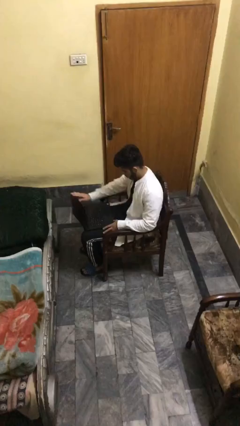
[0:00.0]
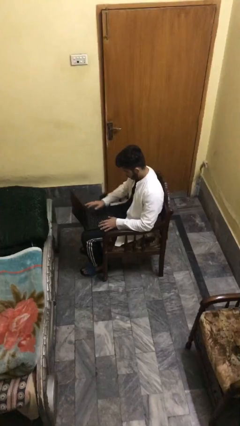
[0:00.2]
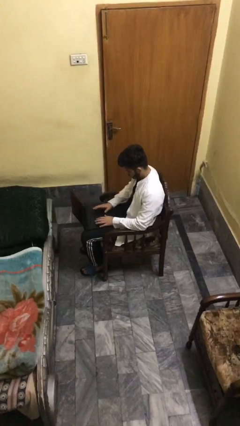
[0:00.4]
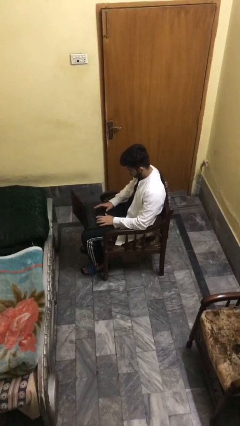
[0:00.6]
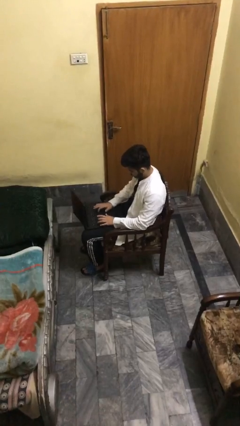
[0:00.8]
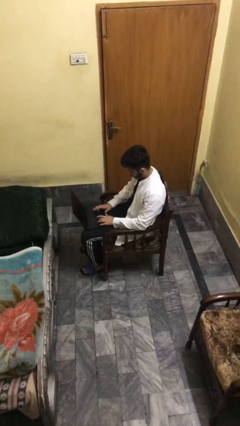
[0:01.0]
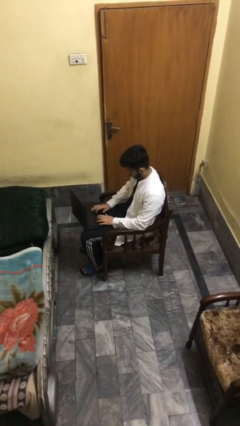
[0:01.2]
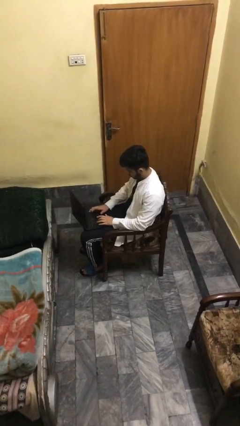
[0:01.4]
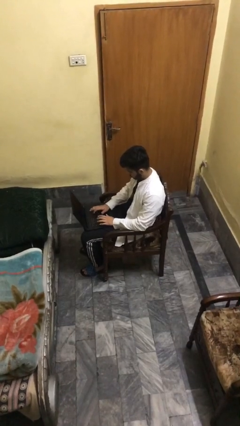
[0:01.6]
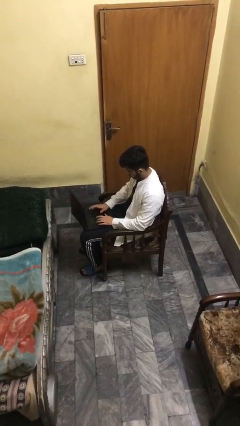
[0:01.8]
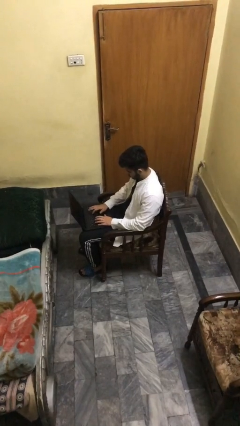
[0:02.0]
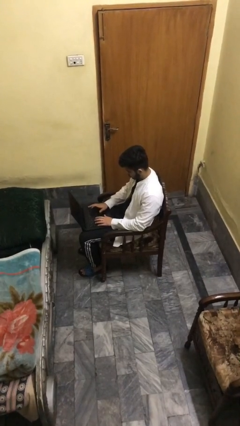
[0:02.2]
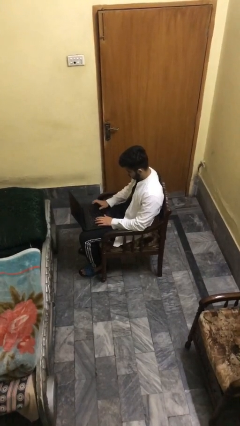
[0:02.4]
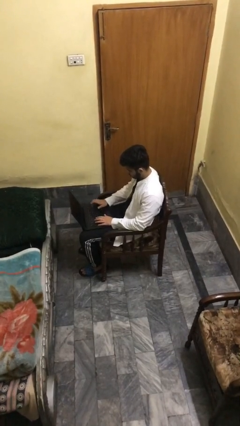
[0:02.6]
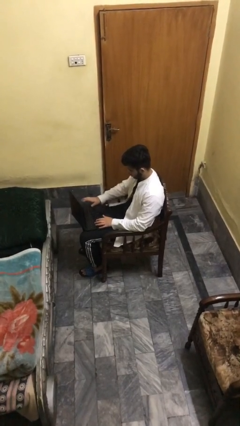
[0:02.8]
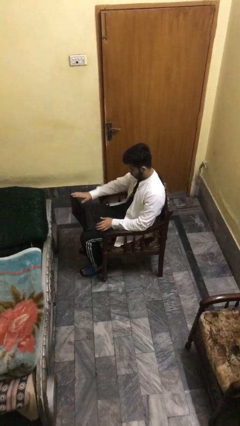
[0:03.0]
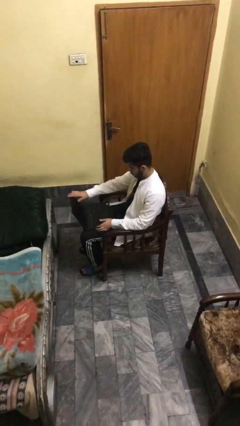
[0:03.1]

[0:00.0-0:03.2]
person interacts with laptop

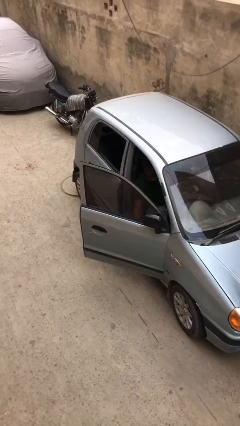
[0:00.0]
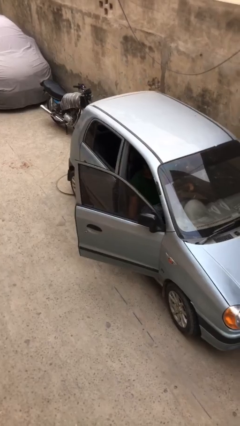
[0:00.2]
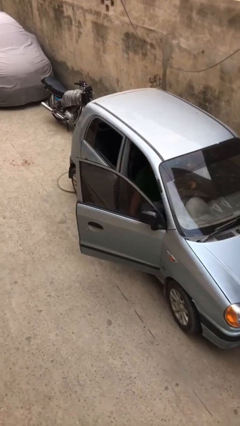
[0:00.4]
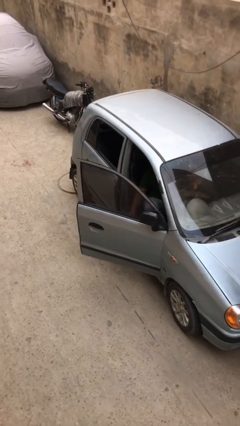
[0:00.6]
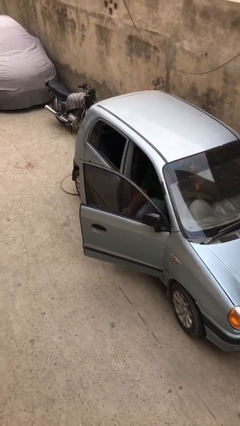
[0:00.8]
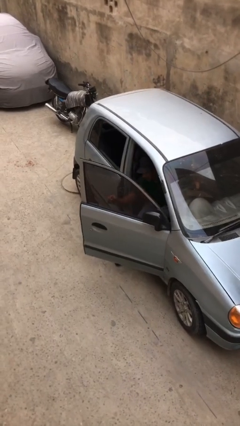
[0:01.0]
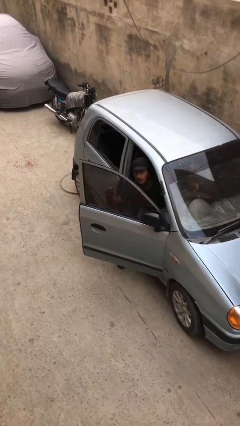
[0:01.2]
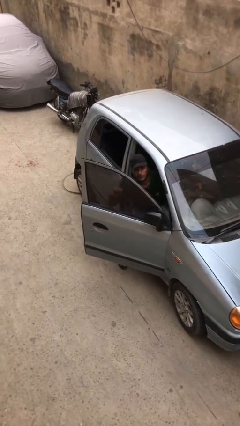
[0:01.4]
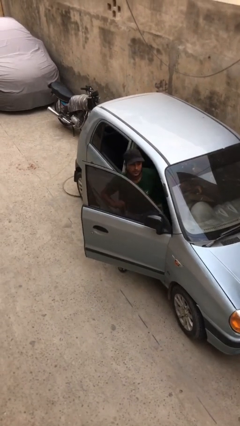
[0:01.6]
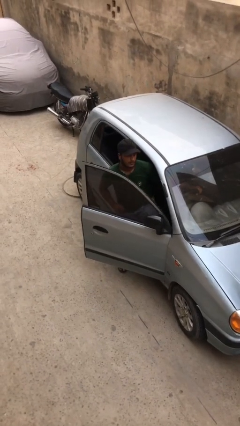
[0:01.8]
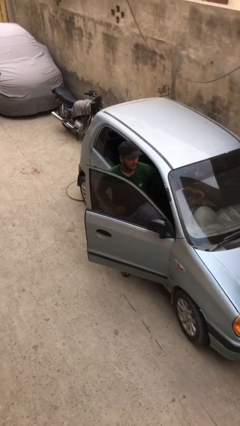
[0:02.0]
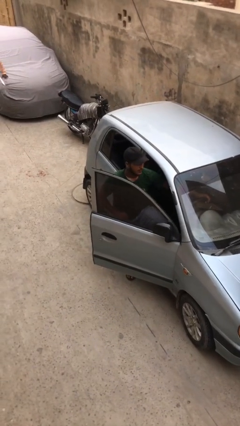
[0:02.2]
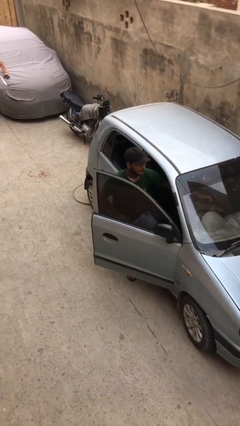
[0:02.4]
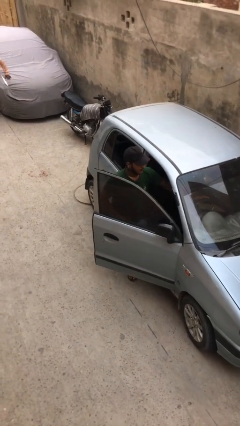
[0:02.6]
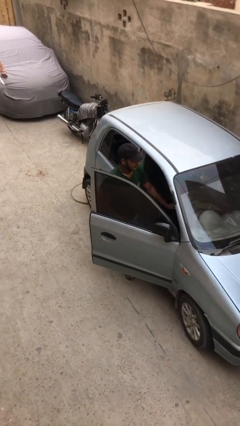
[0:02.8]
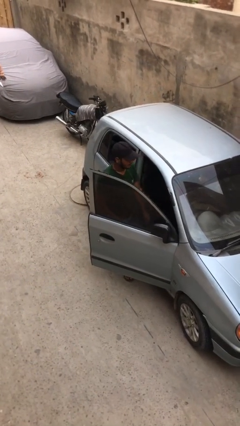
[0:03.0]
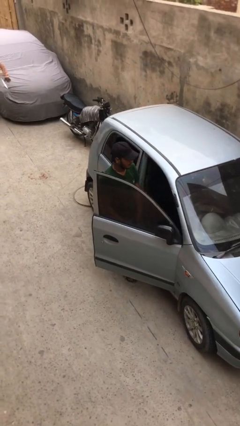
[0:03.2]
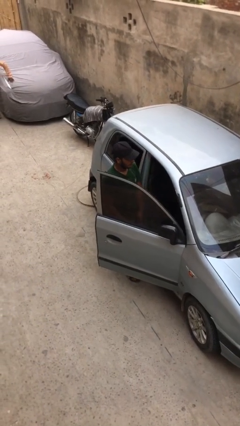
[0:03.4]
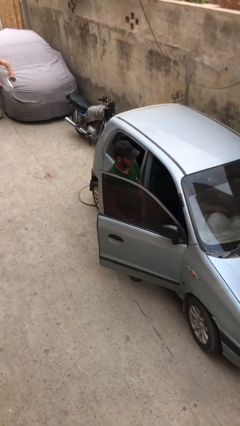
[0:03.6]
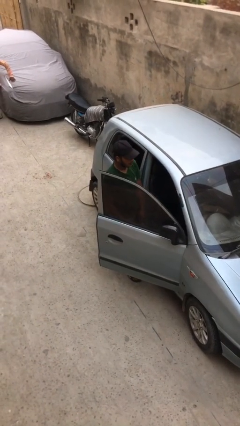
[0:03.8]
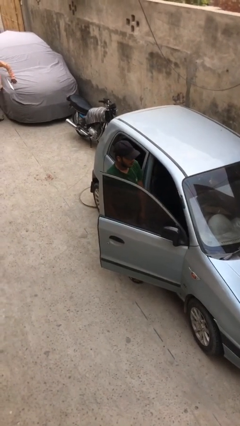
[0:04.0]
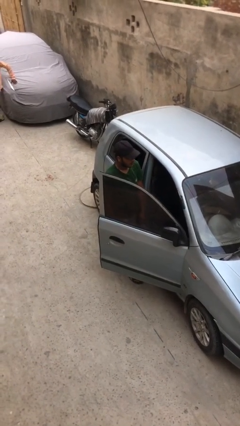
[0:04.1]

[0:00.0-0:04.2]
person exits car

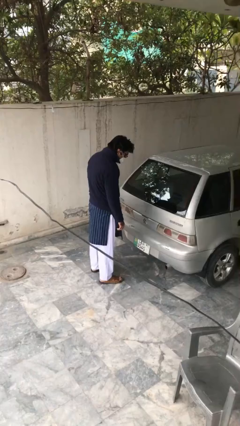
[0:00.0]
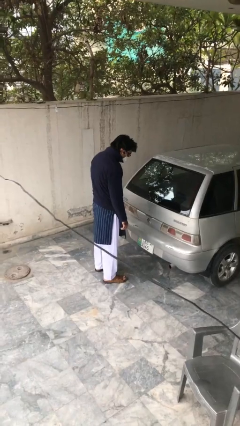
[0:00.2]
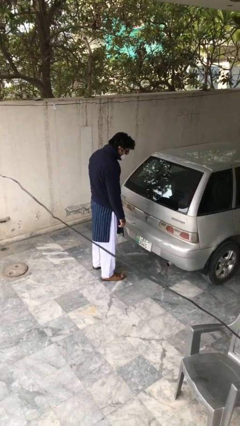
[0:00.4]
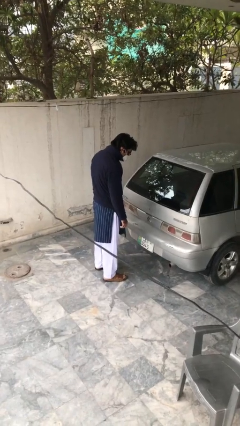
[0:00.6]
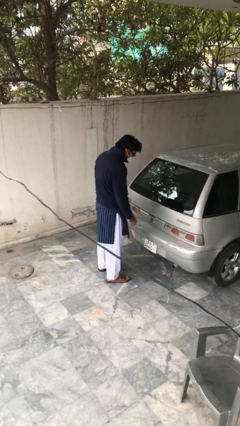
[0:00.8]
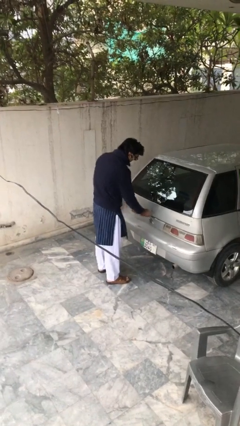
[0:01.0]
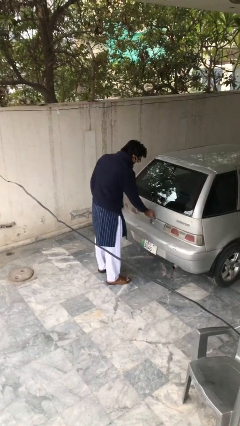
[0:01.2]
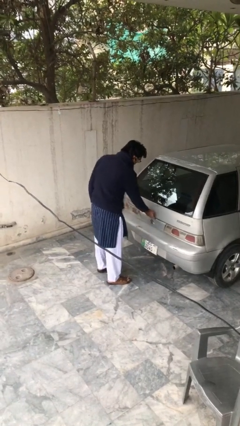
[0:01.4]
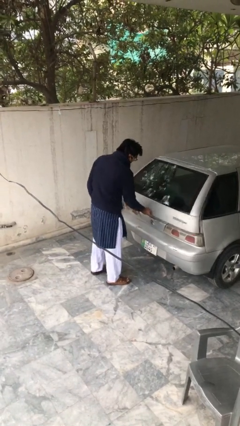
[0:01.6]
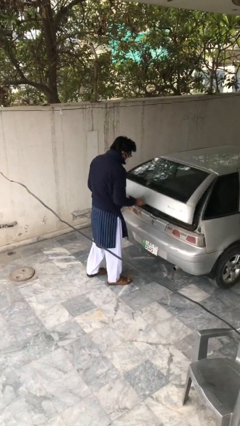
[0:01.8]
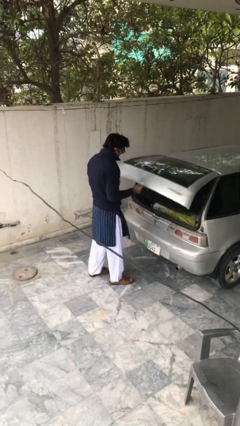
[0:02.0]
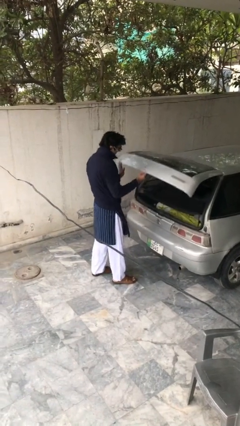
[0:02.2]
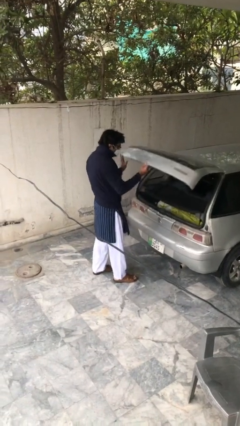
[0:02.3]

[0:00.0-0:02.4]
person opens car trunk

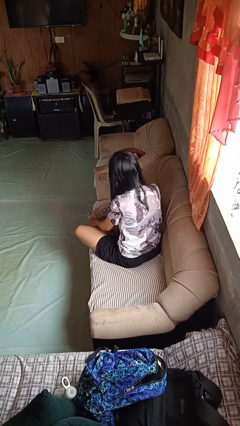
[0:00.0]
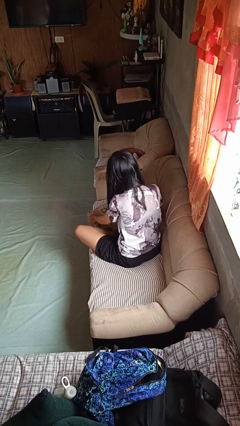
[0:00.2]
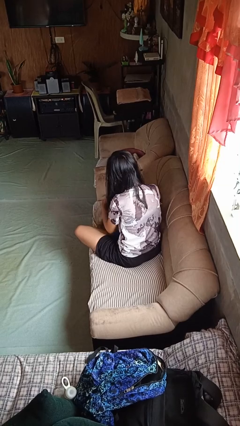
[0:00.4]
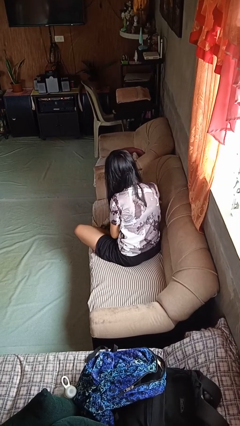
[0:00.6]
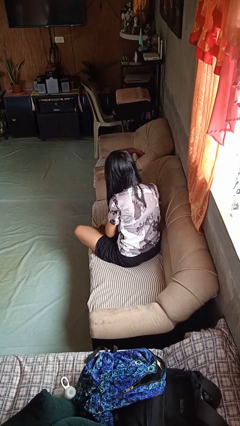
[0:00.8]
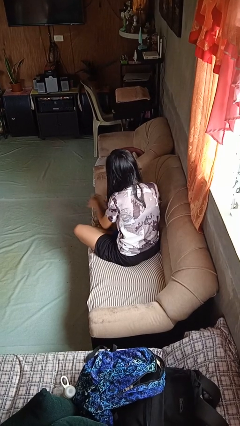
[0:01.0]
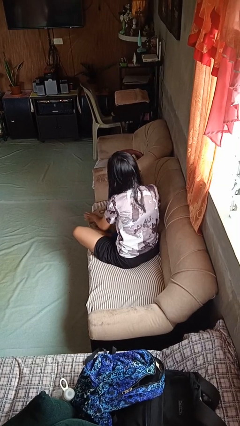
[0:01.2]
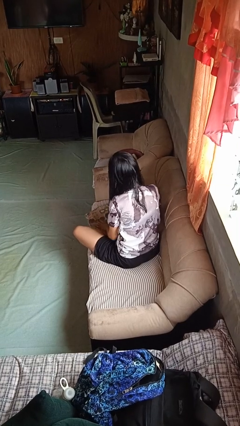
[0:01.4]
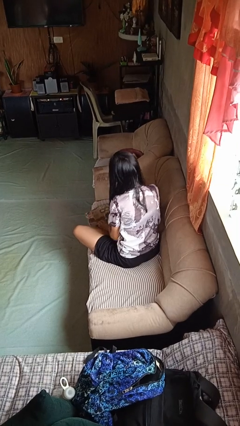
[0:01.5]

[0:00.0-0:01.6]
person searches in couch

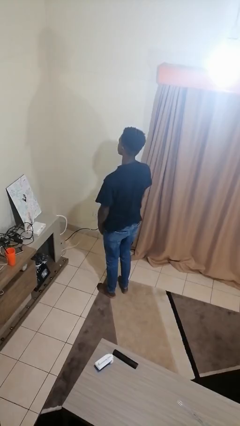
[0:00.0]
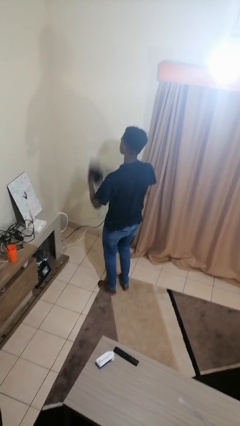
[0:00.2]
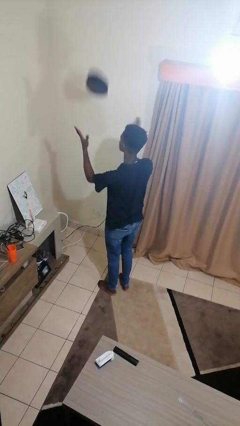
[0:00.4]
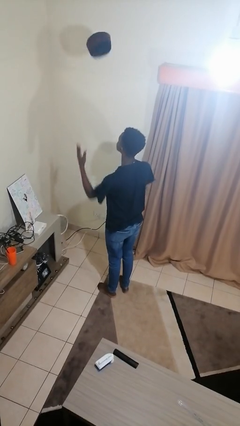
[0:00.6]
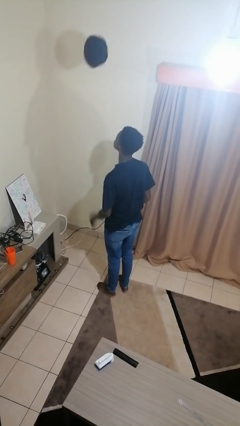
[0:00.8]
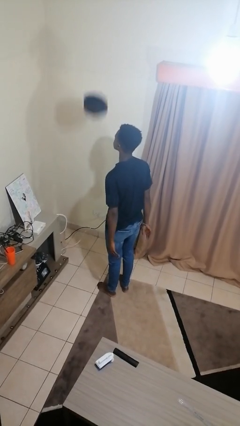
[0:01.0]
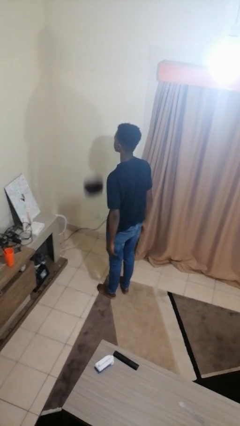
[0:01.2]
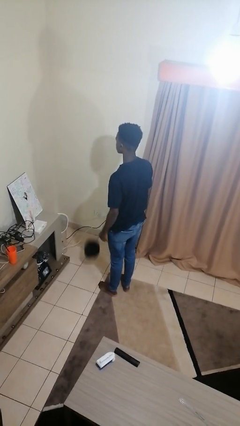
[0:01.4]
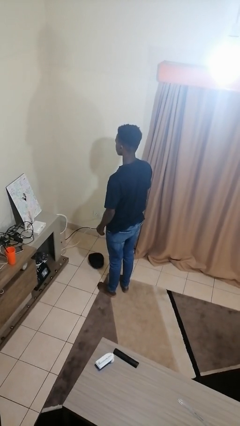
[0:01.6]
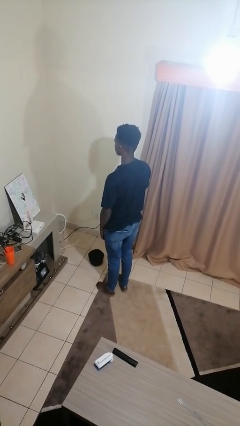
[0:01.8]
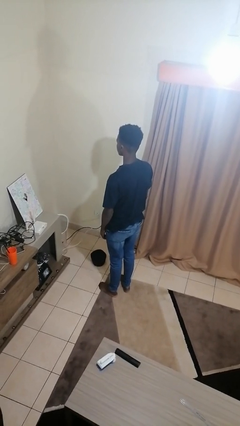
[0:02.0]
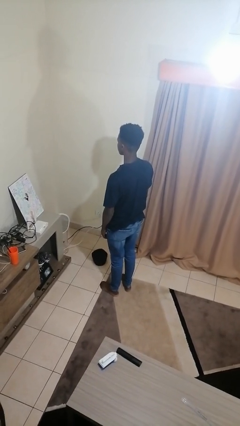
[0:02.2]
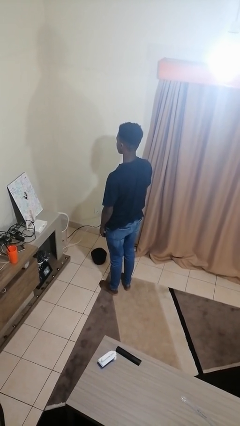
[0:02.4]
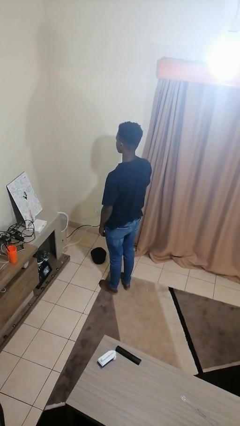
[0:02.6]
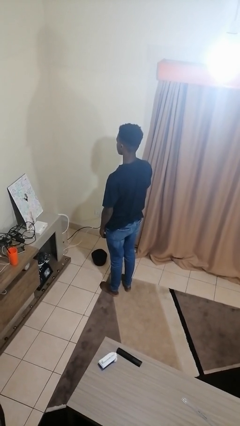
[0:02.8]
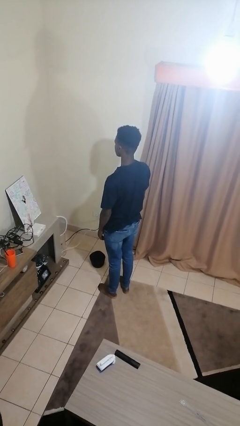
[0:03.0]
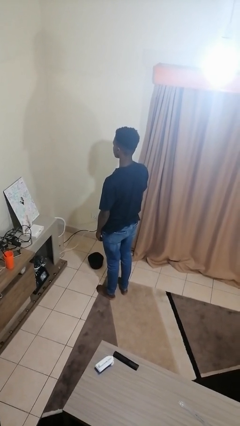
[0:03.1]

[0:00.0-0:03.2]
person throws object into air

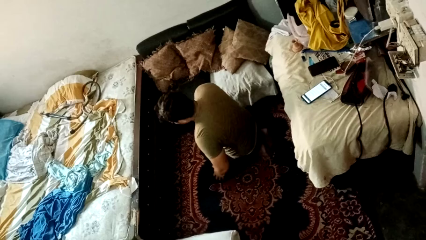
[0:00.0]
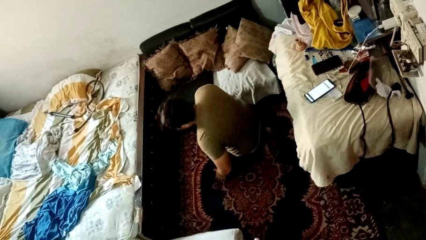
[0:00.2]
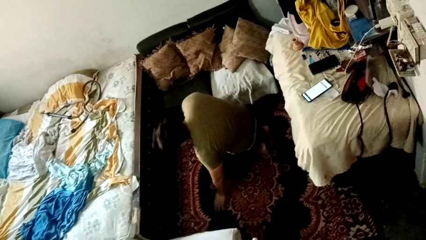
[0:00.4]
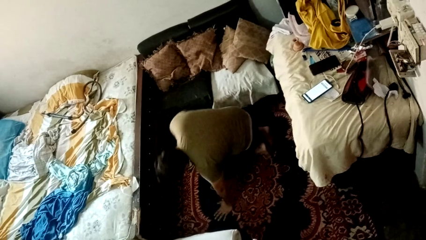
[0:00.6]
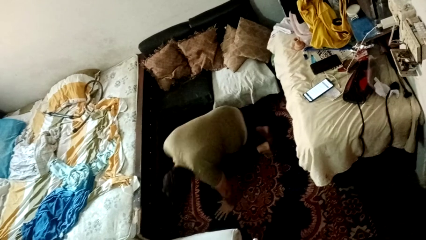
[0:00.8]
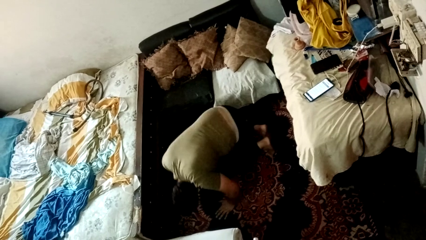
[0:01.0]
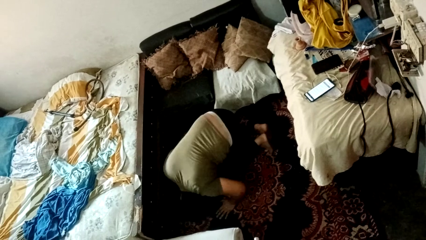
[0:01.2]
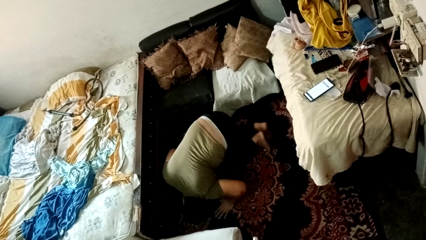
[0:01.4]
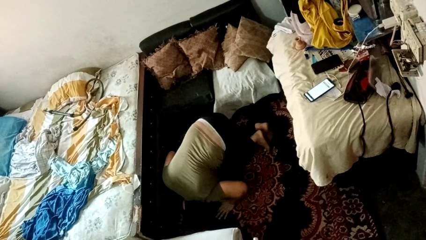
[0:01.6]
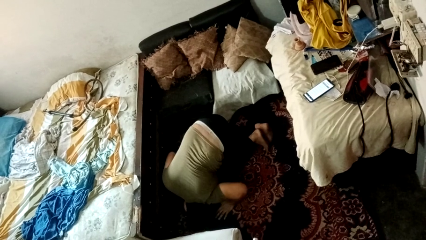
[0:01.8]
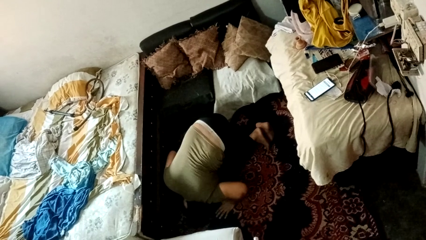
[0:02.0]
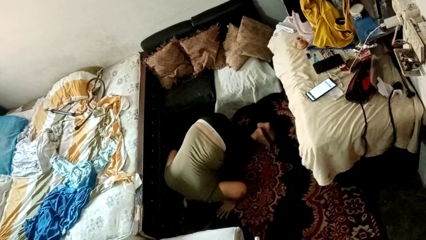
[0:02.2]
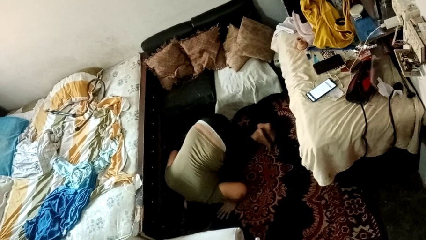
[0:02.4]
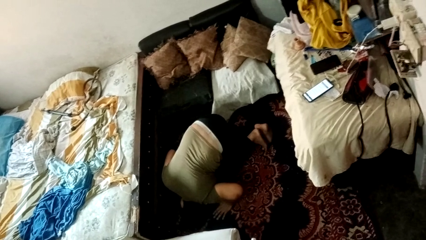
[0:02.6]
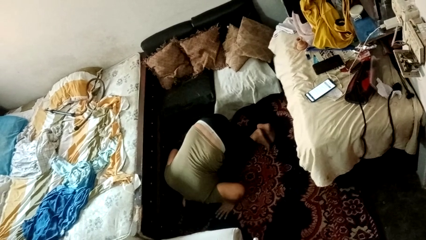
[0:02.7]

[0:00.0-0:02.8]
person searches under bed
